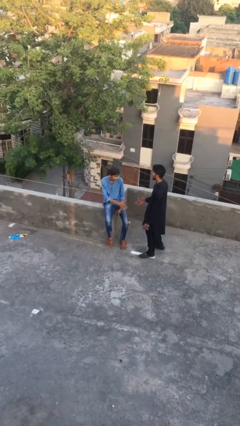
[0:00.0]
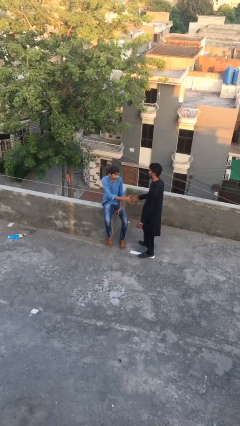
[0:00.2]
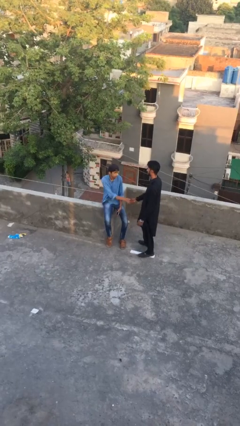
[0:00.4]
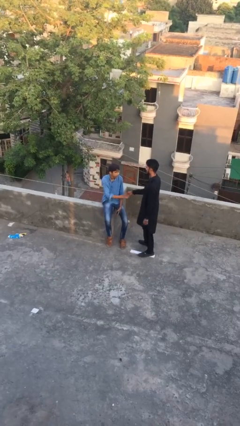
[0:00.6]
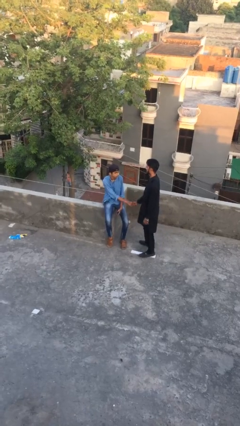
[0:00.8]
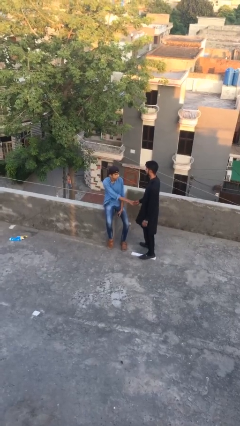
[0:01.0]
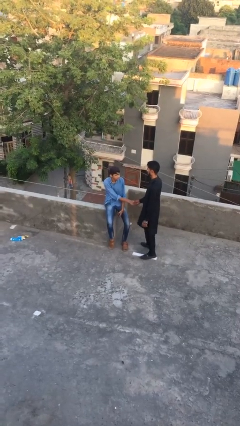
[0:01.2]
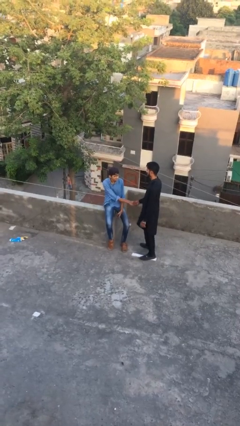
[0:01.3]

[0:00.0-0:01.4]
person shakes hand

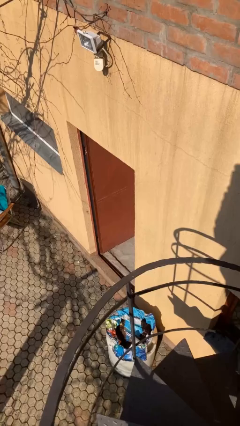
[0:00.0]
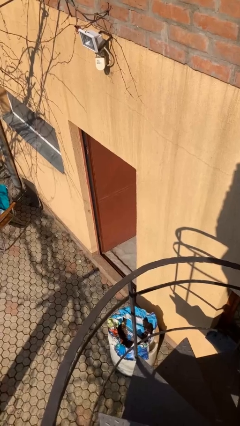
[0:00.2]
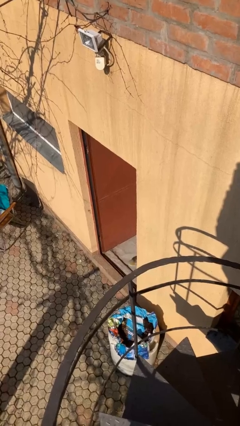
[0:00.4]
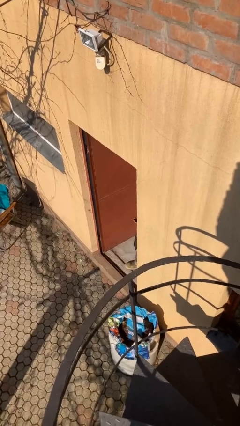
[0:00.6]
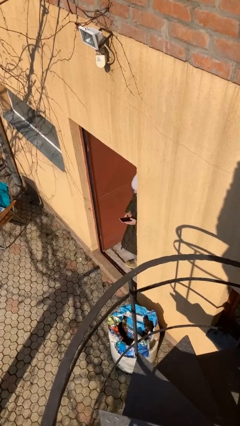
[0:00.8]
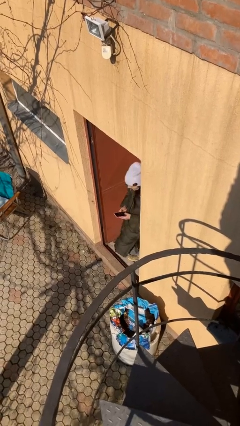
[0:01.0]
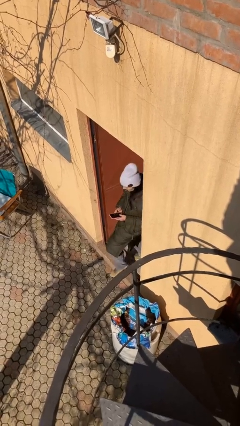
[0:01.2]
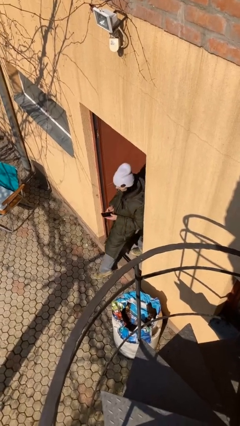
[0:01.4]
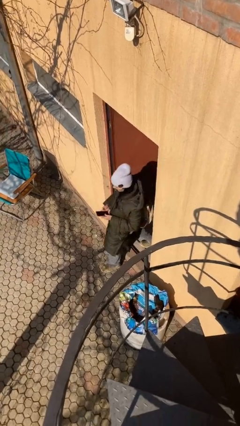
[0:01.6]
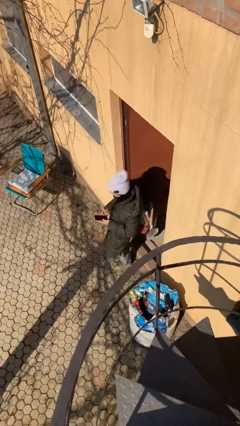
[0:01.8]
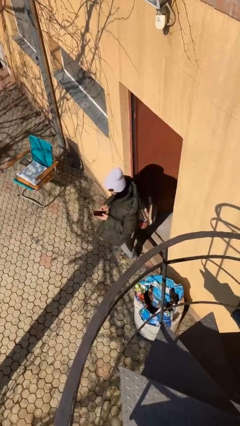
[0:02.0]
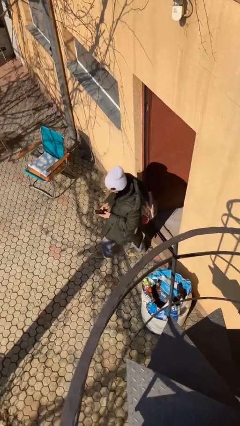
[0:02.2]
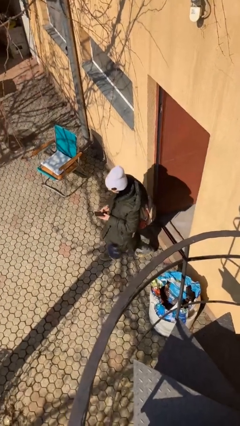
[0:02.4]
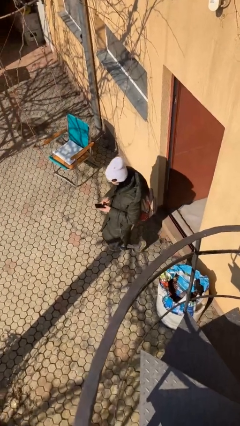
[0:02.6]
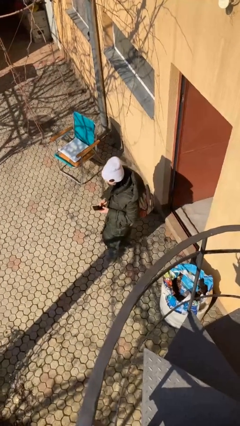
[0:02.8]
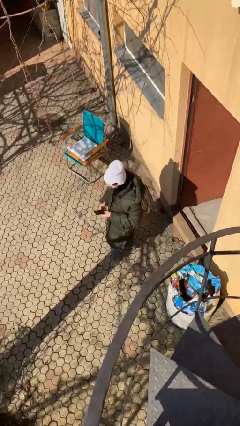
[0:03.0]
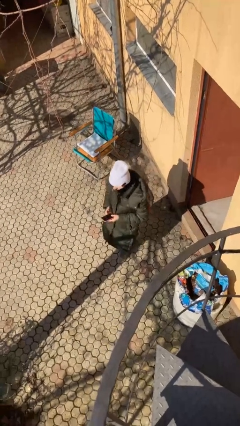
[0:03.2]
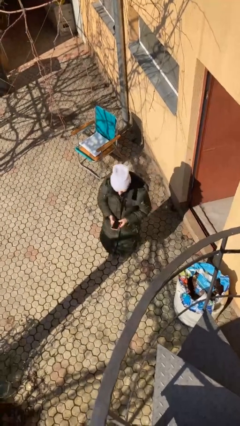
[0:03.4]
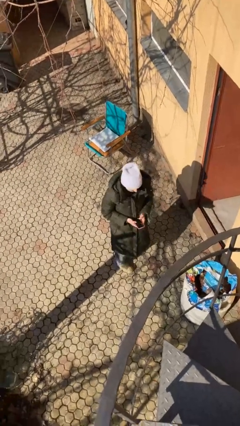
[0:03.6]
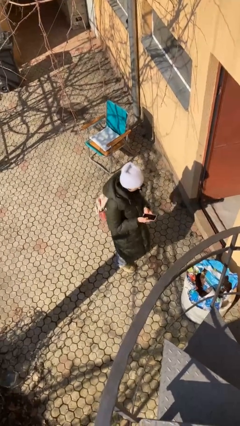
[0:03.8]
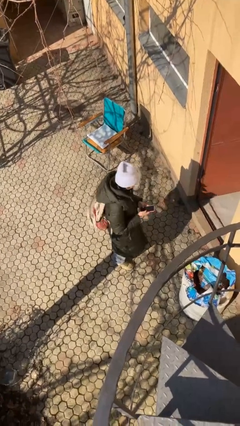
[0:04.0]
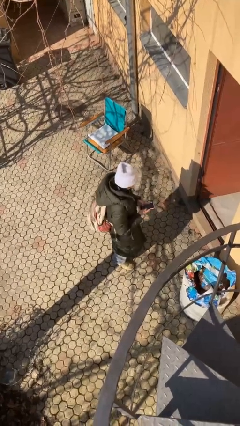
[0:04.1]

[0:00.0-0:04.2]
person enters scene through structure

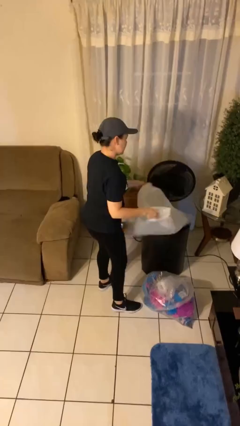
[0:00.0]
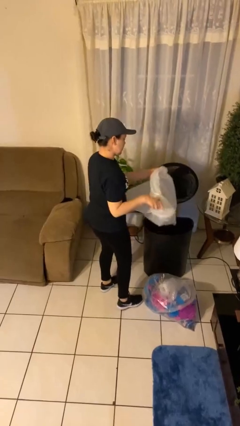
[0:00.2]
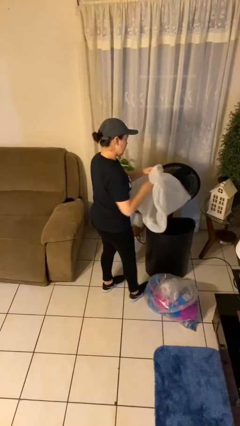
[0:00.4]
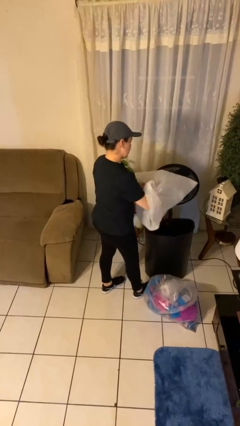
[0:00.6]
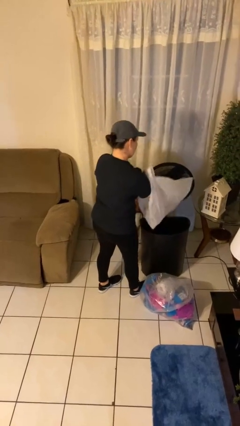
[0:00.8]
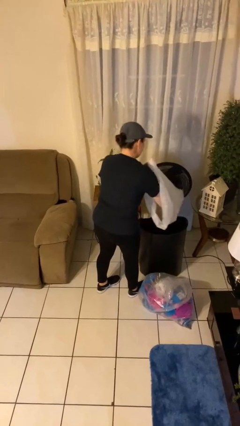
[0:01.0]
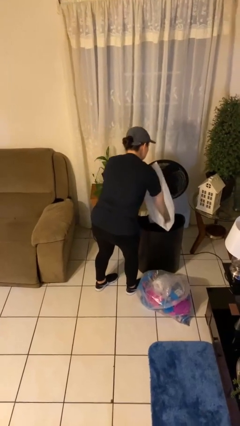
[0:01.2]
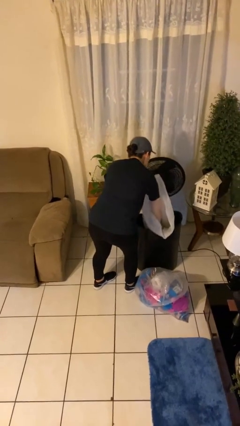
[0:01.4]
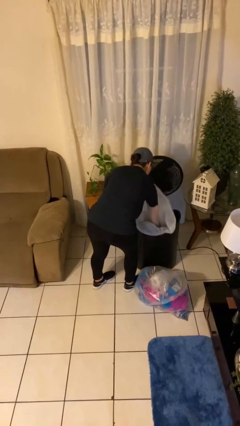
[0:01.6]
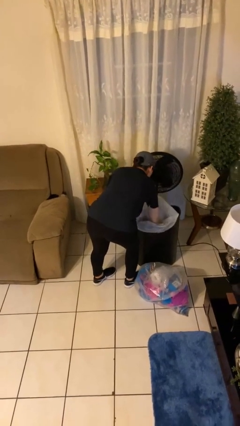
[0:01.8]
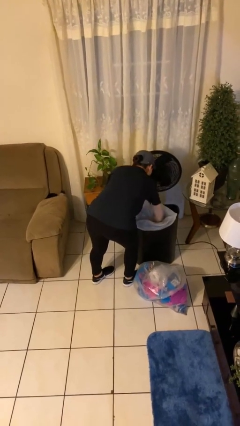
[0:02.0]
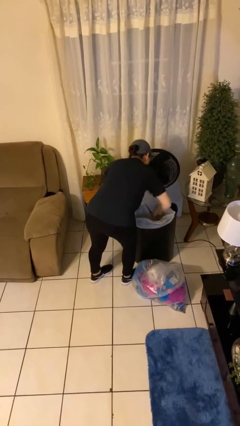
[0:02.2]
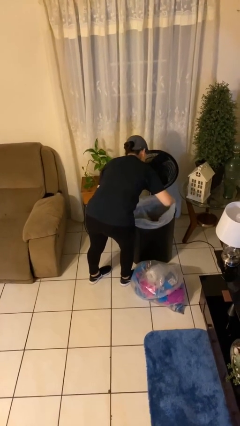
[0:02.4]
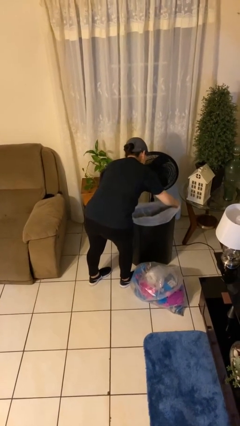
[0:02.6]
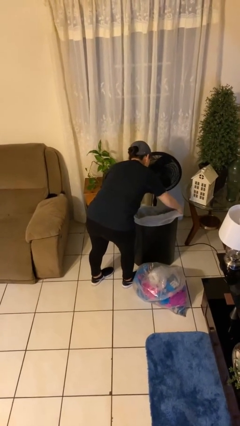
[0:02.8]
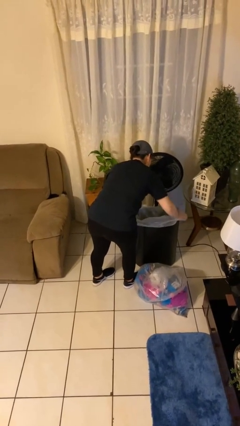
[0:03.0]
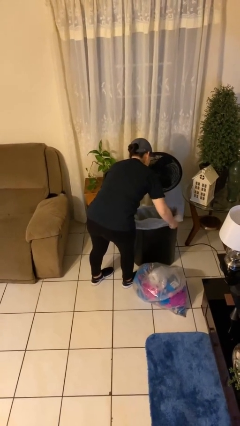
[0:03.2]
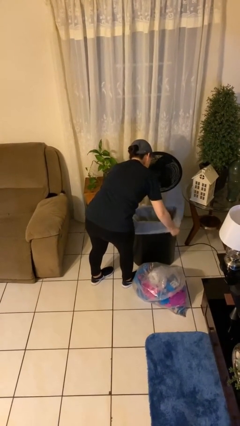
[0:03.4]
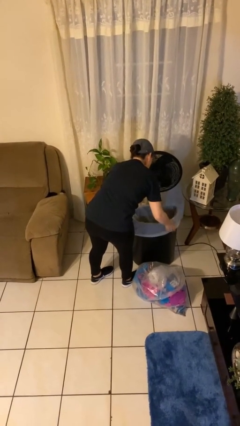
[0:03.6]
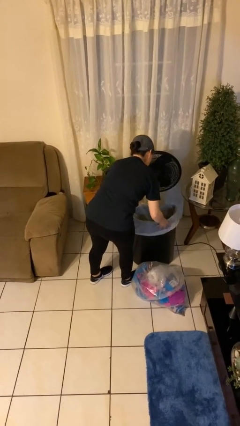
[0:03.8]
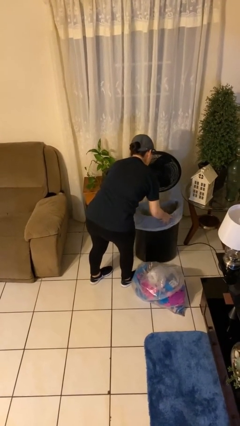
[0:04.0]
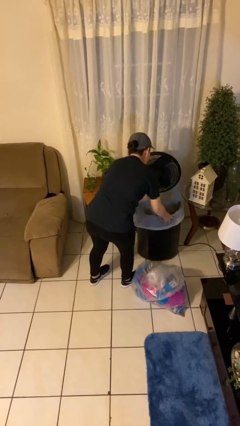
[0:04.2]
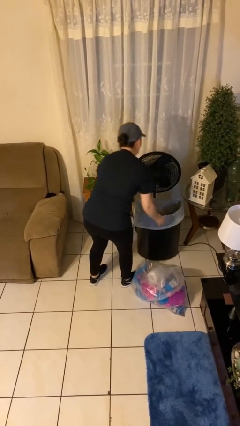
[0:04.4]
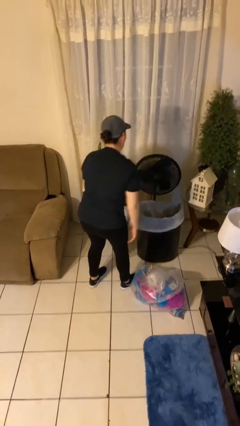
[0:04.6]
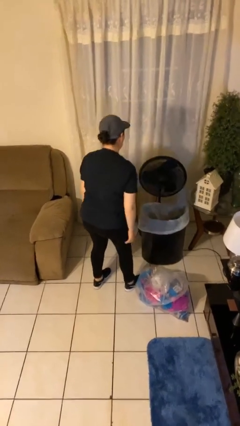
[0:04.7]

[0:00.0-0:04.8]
person inserts trashbag into trashcan

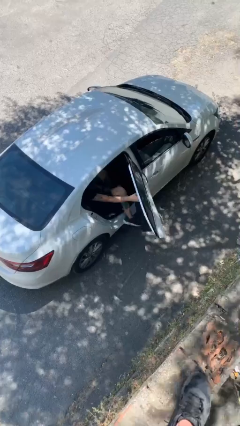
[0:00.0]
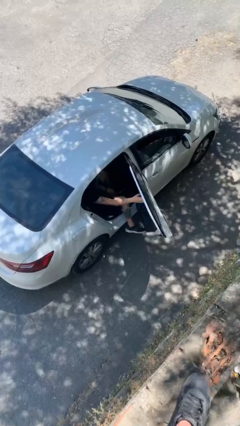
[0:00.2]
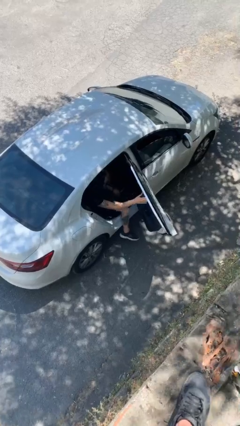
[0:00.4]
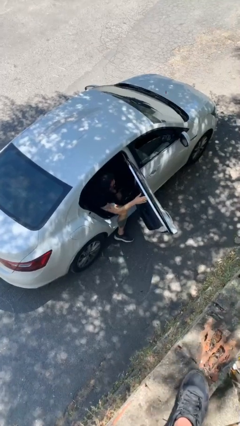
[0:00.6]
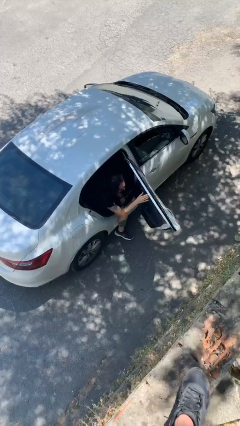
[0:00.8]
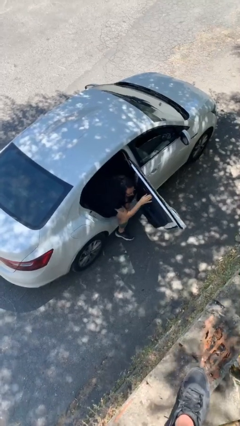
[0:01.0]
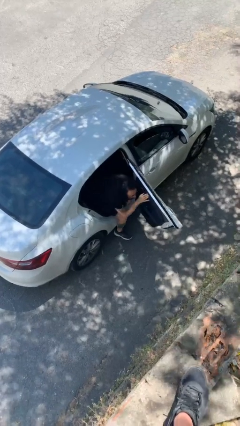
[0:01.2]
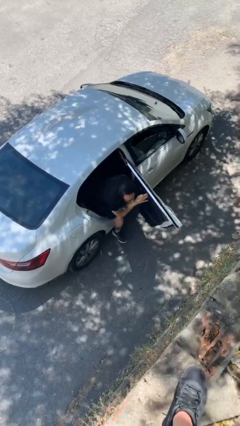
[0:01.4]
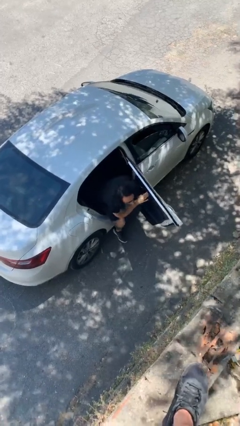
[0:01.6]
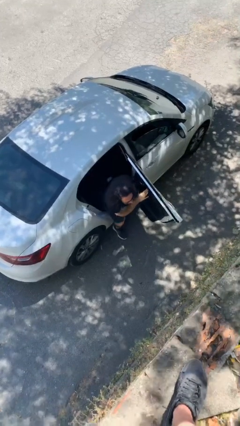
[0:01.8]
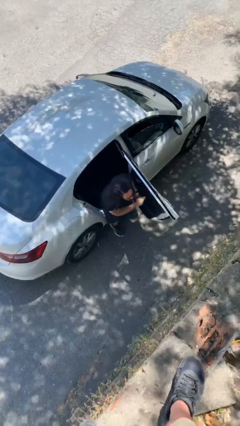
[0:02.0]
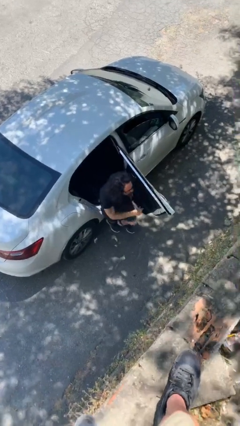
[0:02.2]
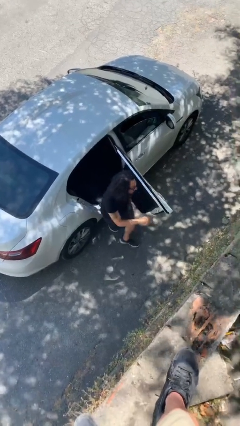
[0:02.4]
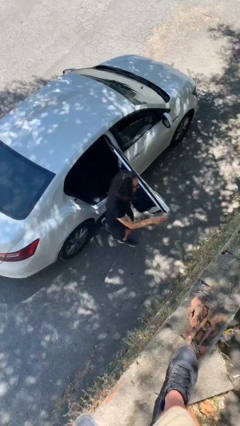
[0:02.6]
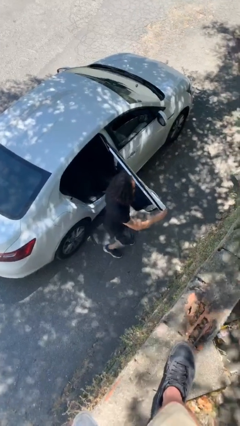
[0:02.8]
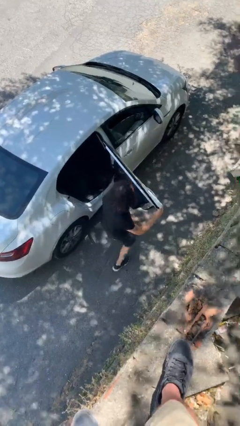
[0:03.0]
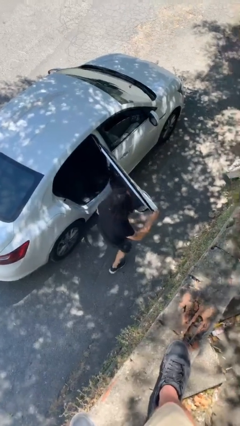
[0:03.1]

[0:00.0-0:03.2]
person exits car

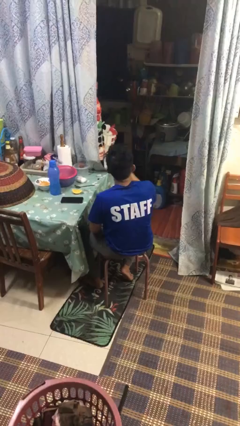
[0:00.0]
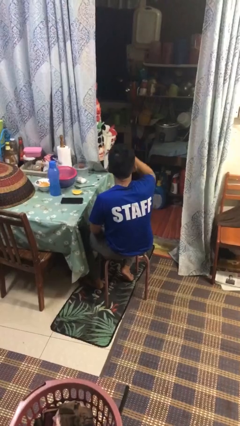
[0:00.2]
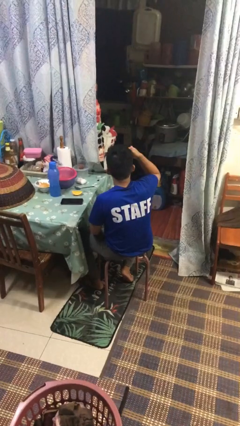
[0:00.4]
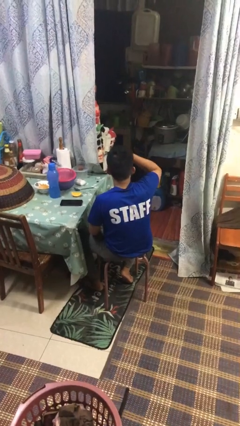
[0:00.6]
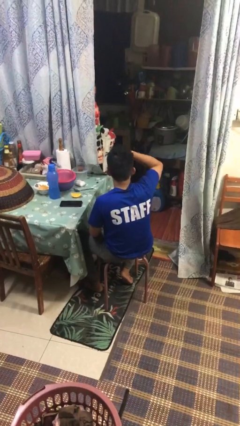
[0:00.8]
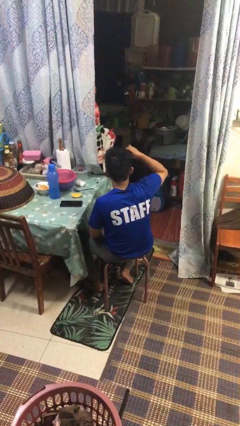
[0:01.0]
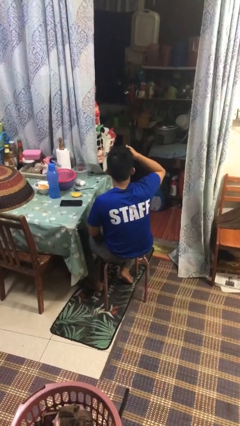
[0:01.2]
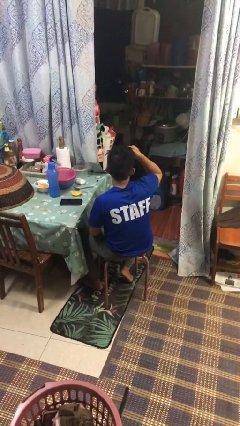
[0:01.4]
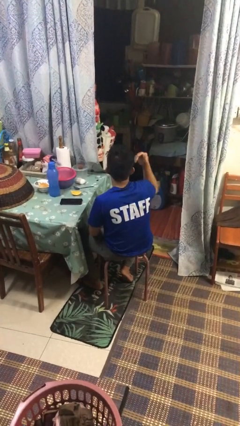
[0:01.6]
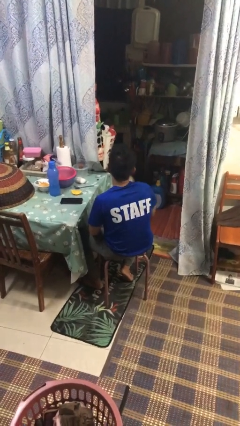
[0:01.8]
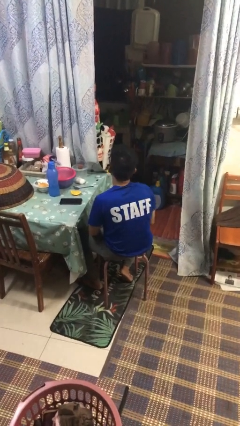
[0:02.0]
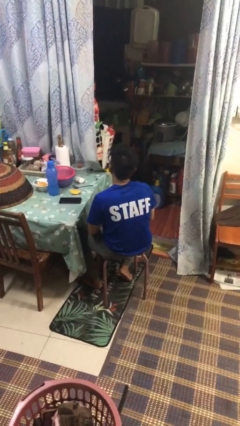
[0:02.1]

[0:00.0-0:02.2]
person scratches face

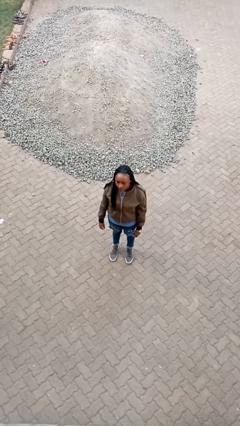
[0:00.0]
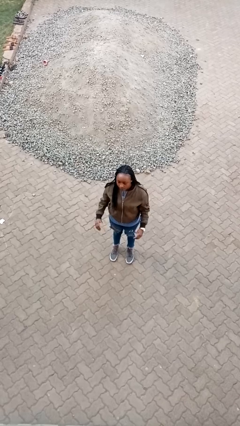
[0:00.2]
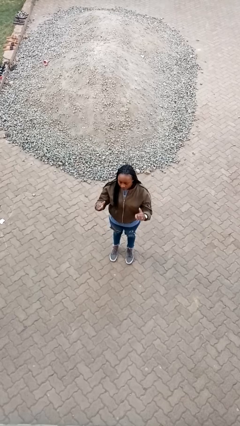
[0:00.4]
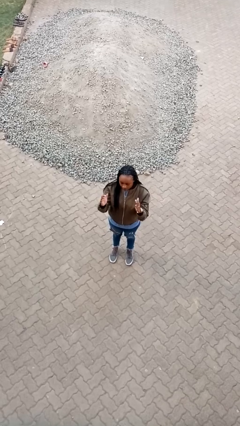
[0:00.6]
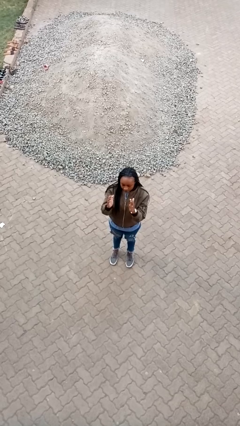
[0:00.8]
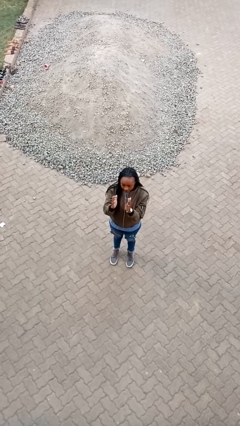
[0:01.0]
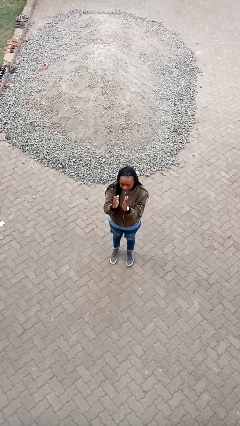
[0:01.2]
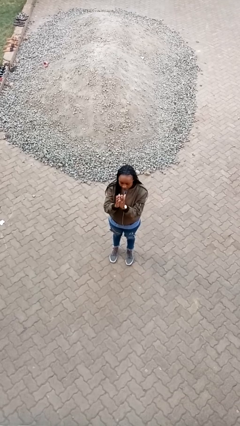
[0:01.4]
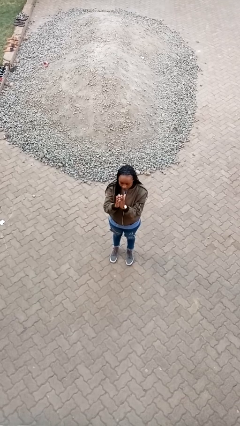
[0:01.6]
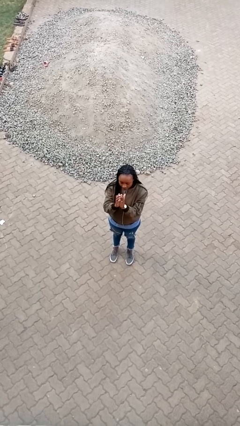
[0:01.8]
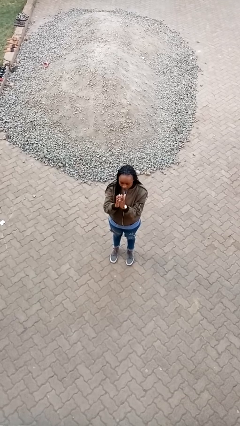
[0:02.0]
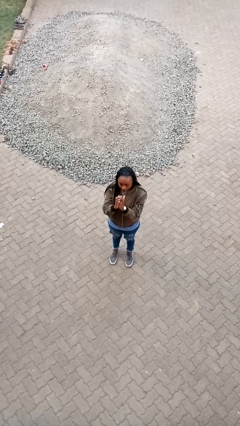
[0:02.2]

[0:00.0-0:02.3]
person gestures zoom in
